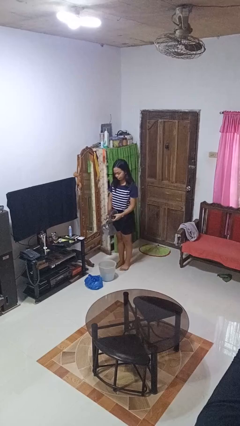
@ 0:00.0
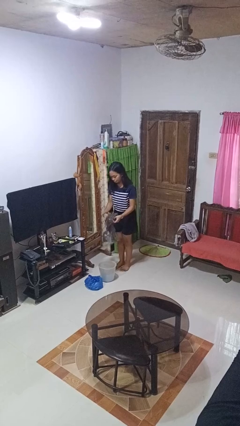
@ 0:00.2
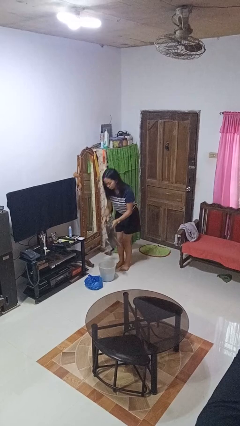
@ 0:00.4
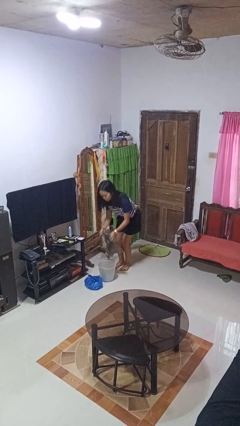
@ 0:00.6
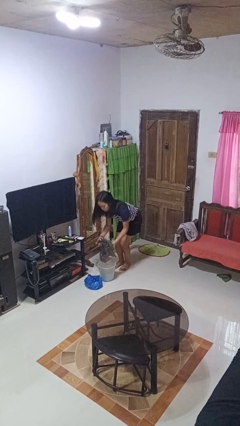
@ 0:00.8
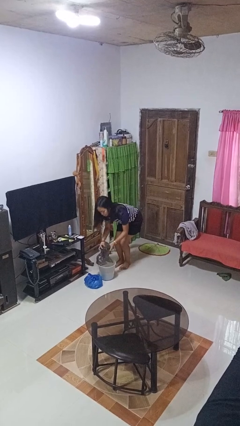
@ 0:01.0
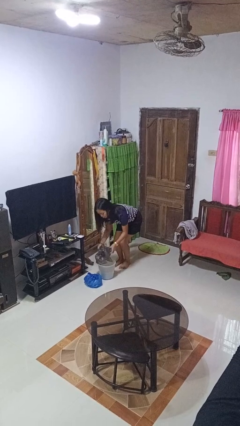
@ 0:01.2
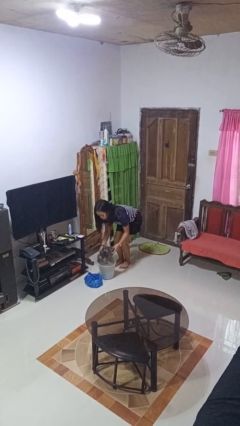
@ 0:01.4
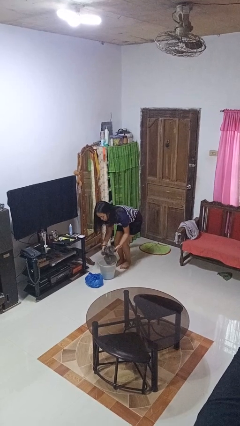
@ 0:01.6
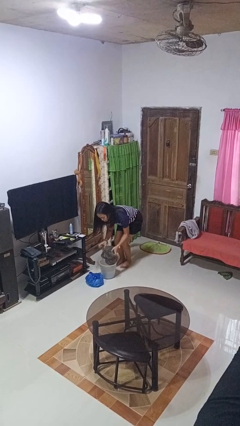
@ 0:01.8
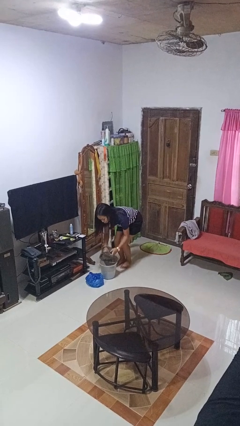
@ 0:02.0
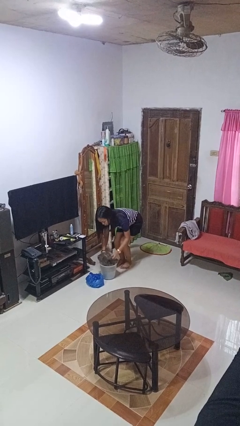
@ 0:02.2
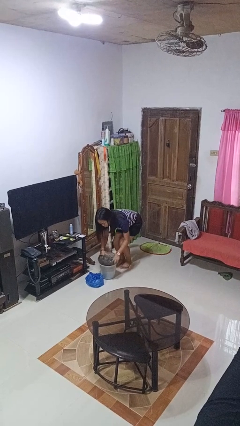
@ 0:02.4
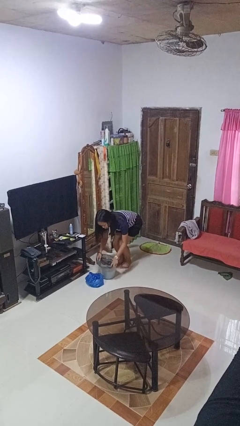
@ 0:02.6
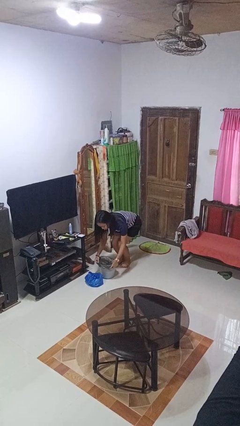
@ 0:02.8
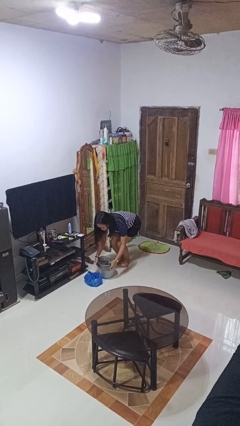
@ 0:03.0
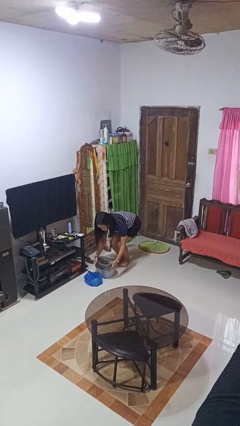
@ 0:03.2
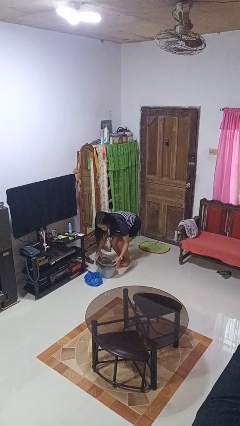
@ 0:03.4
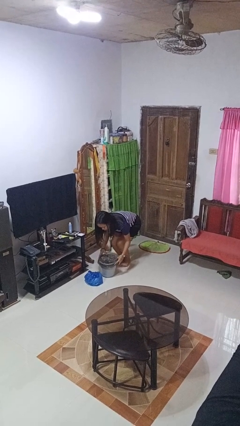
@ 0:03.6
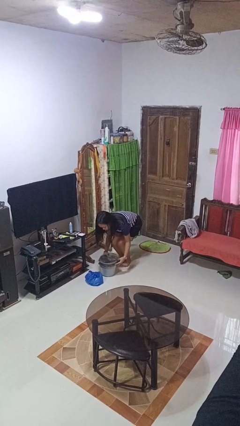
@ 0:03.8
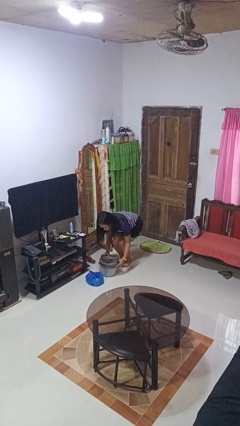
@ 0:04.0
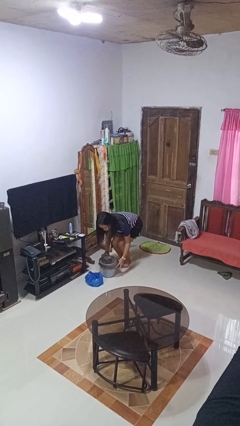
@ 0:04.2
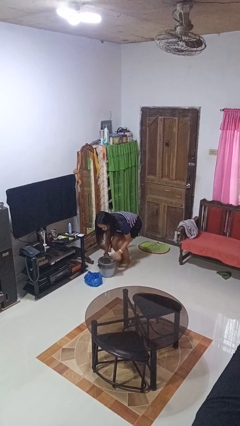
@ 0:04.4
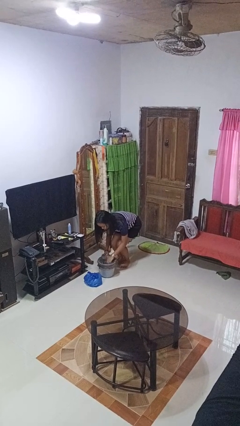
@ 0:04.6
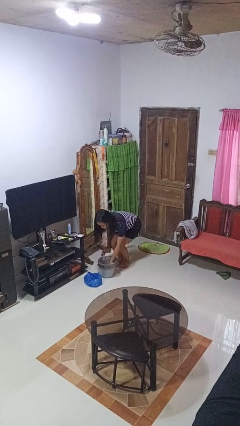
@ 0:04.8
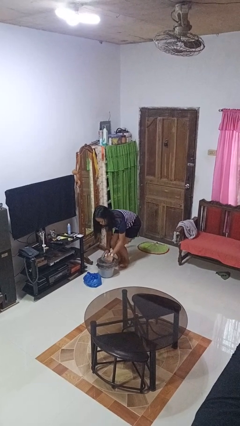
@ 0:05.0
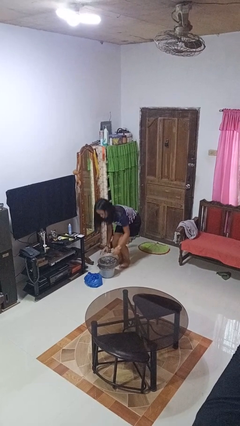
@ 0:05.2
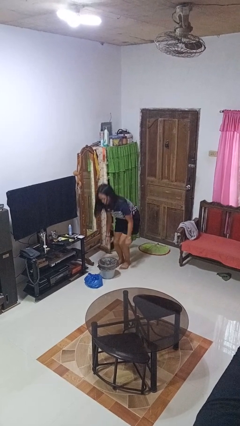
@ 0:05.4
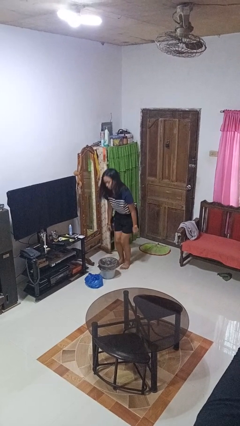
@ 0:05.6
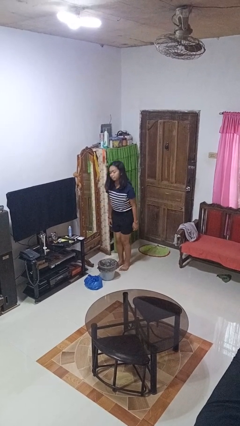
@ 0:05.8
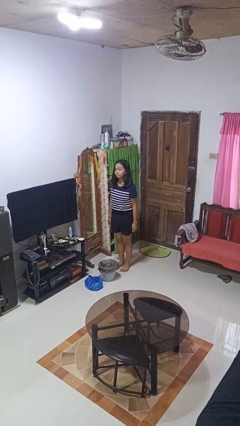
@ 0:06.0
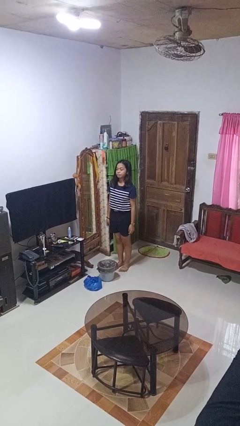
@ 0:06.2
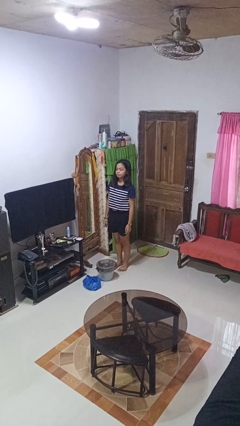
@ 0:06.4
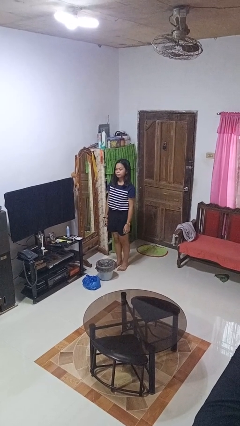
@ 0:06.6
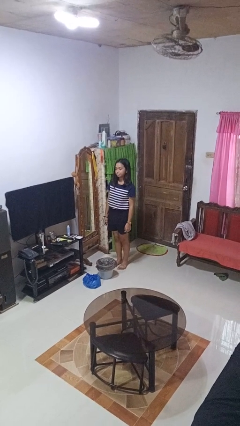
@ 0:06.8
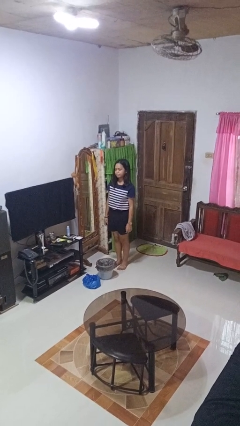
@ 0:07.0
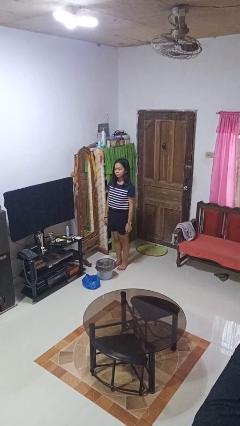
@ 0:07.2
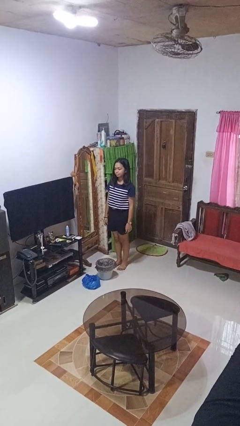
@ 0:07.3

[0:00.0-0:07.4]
person inserts trashbag into trashcan

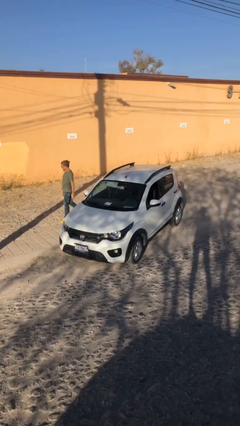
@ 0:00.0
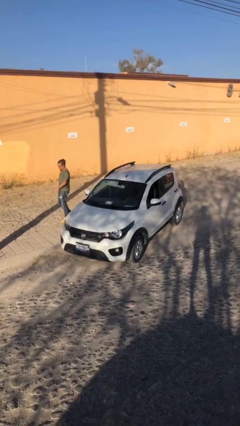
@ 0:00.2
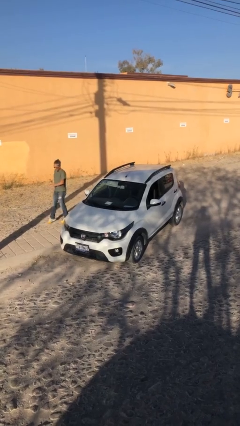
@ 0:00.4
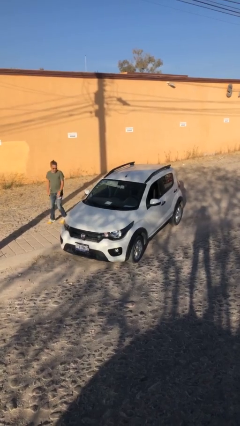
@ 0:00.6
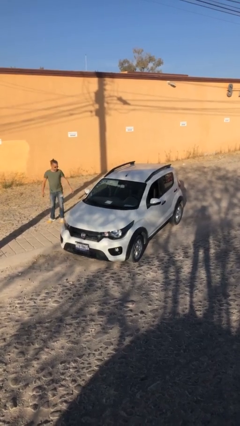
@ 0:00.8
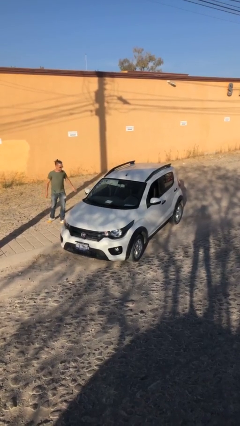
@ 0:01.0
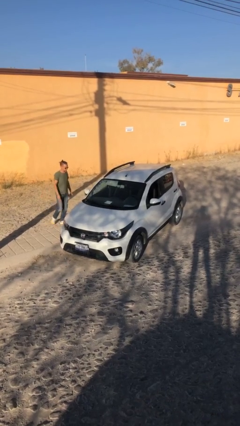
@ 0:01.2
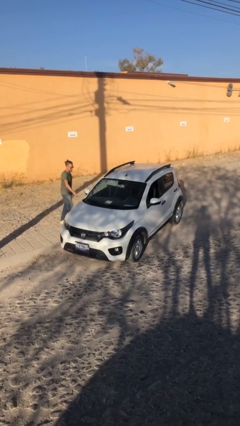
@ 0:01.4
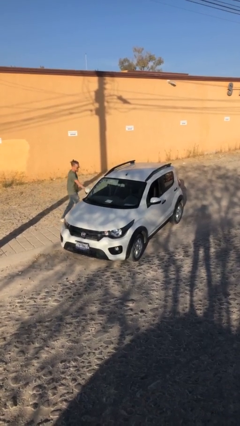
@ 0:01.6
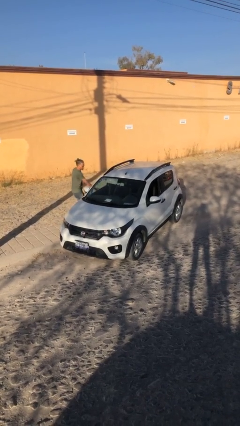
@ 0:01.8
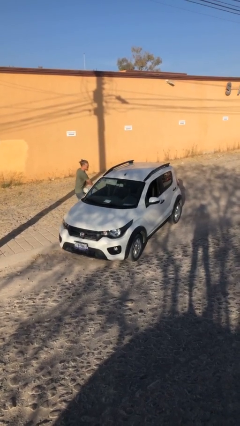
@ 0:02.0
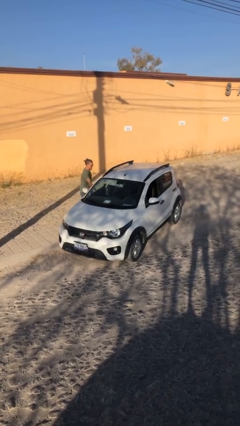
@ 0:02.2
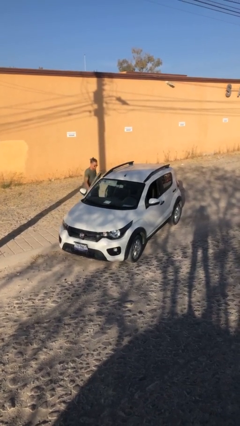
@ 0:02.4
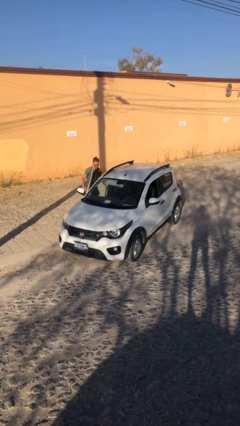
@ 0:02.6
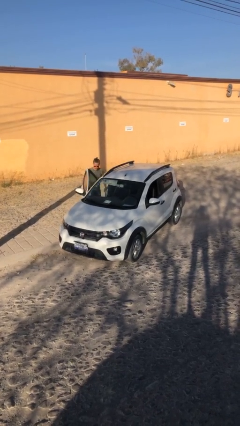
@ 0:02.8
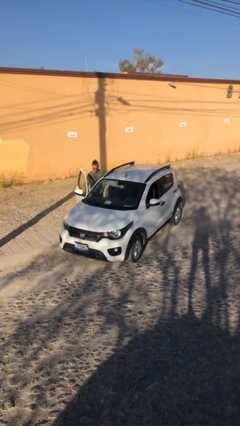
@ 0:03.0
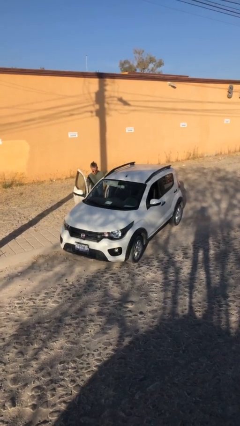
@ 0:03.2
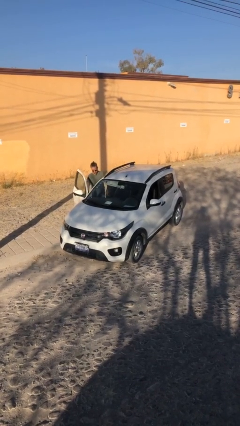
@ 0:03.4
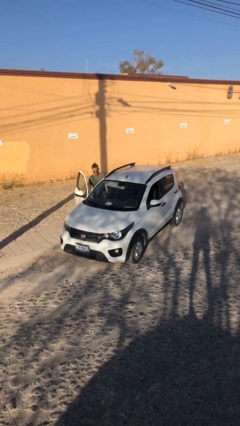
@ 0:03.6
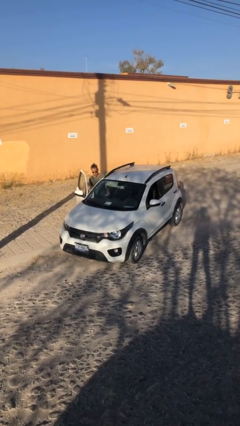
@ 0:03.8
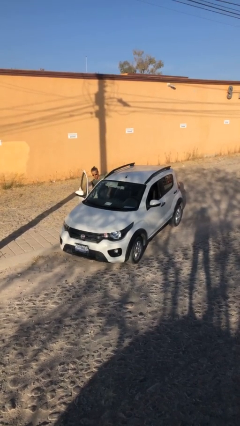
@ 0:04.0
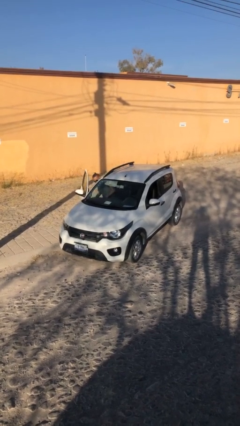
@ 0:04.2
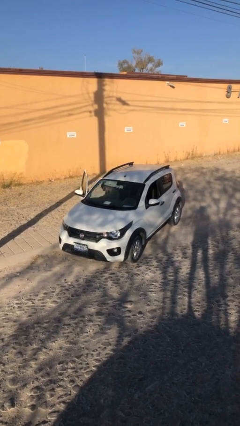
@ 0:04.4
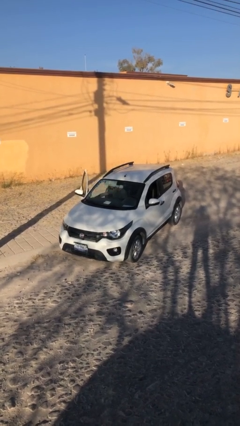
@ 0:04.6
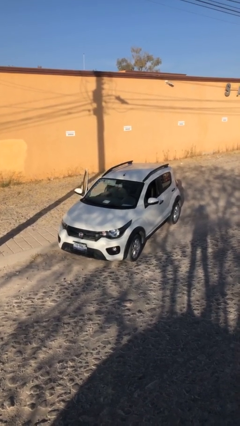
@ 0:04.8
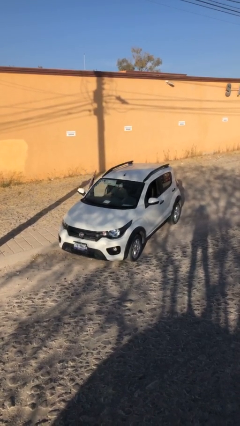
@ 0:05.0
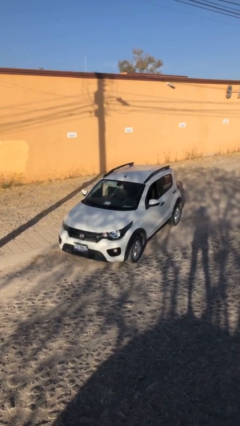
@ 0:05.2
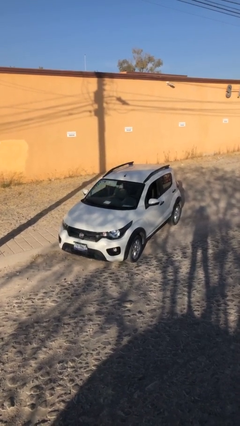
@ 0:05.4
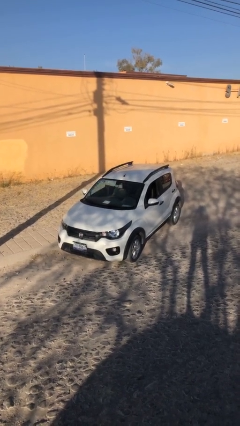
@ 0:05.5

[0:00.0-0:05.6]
car picks up person

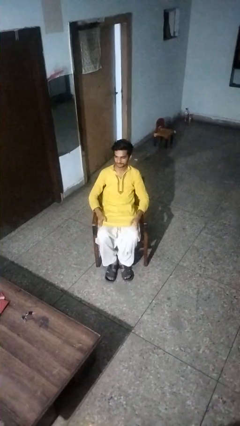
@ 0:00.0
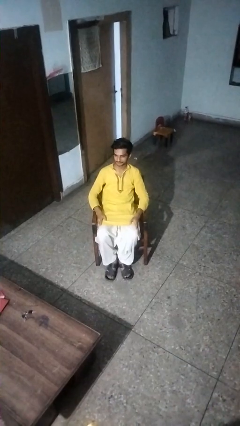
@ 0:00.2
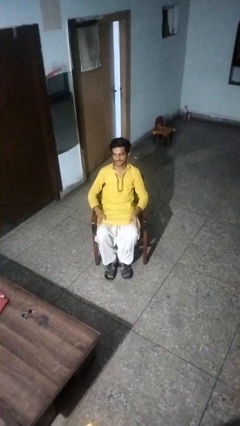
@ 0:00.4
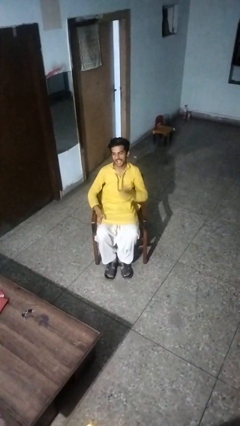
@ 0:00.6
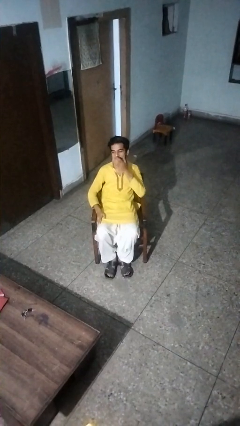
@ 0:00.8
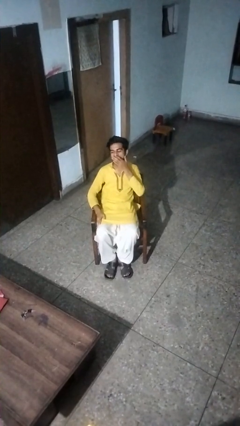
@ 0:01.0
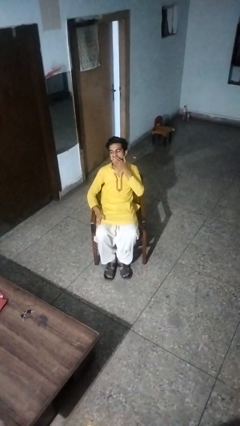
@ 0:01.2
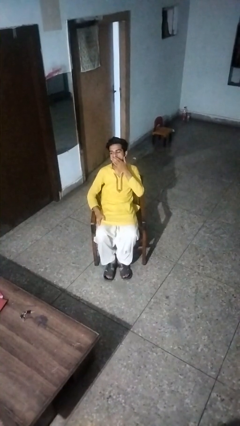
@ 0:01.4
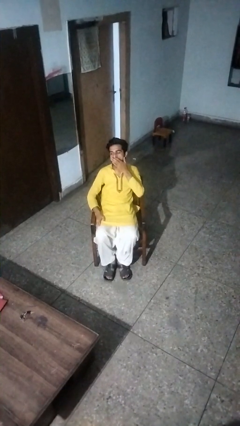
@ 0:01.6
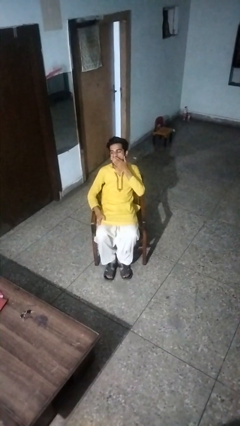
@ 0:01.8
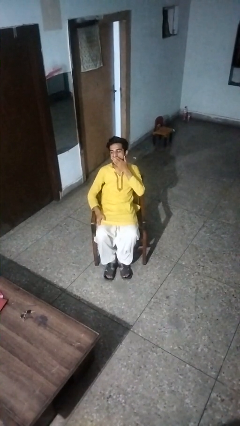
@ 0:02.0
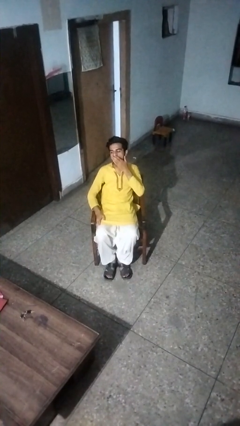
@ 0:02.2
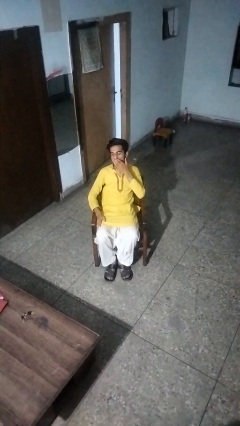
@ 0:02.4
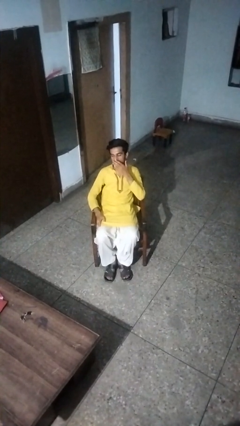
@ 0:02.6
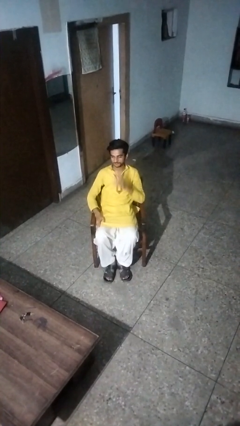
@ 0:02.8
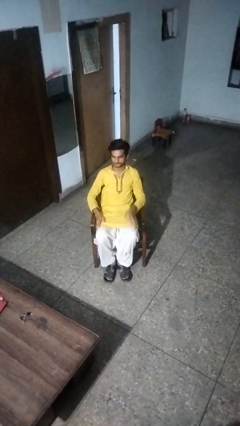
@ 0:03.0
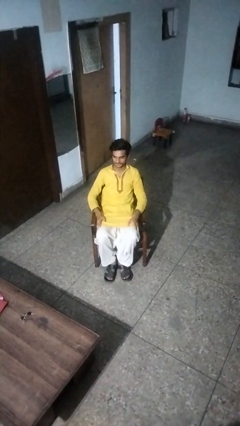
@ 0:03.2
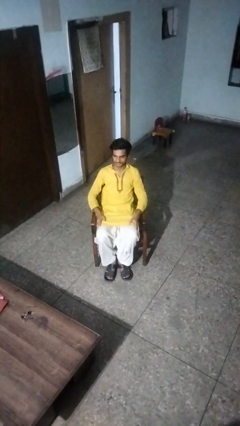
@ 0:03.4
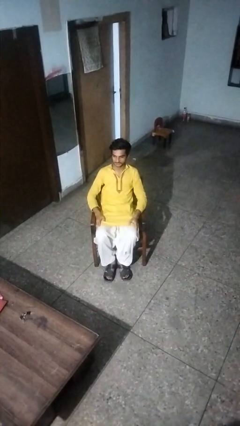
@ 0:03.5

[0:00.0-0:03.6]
person yawns

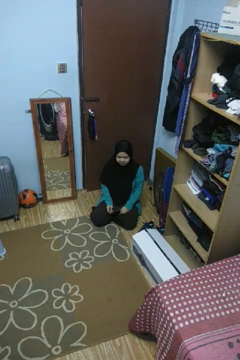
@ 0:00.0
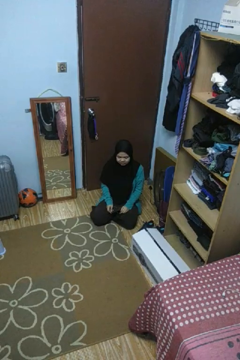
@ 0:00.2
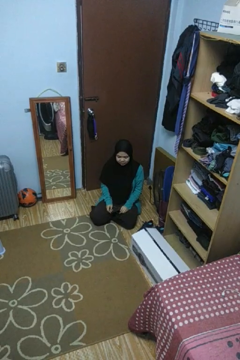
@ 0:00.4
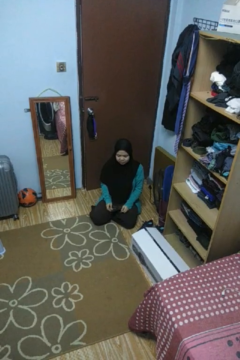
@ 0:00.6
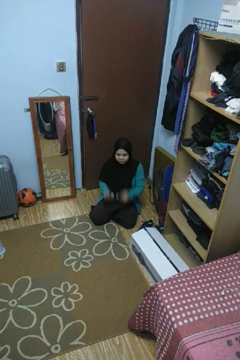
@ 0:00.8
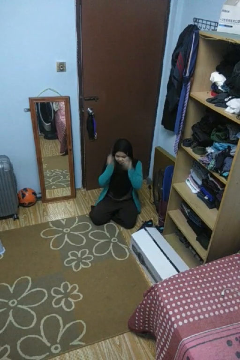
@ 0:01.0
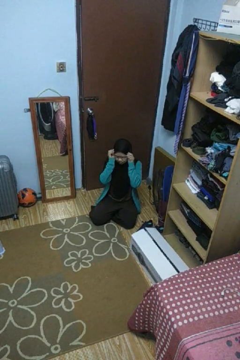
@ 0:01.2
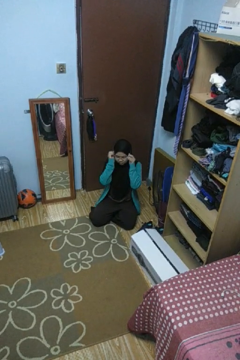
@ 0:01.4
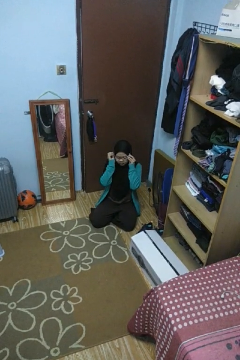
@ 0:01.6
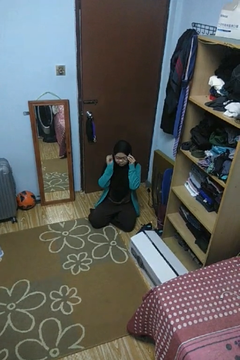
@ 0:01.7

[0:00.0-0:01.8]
person puts on glasses
